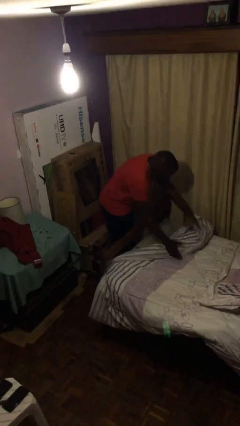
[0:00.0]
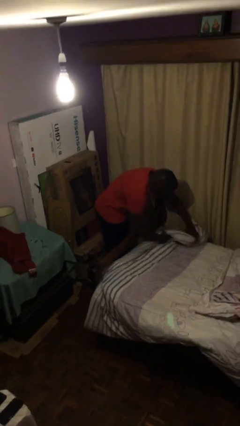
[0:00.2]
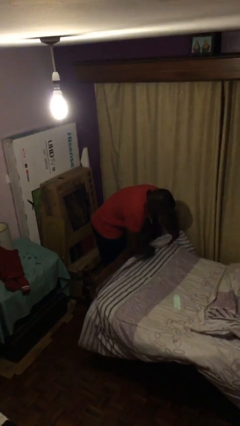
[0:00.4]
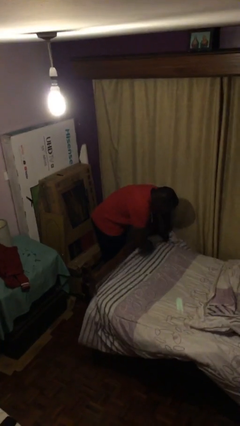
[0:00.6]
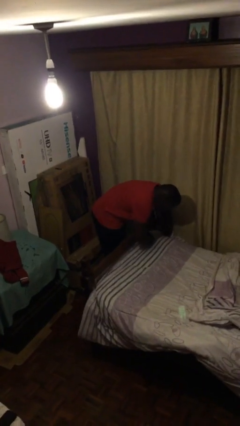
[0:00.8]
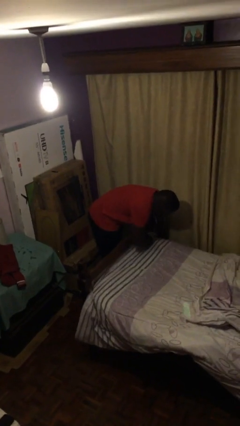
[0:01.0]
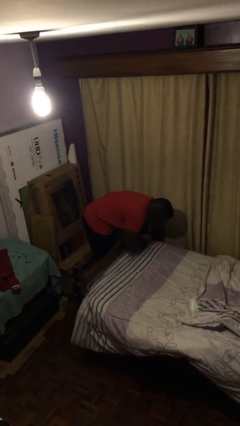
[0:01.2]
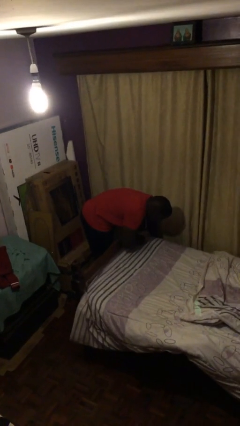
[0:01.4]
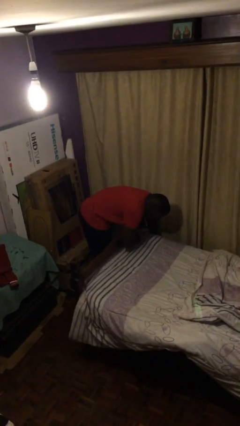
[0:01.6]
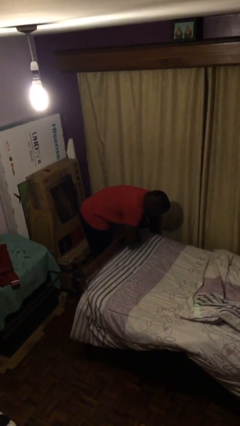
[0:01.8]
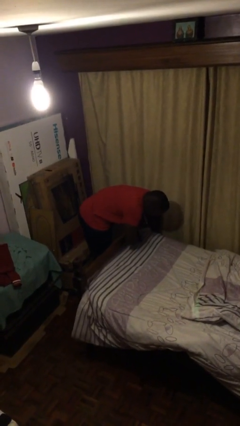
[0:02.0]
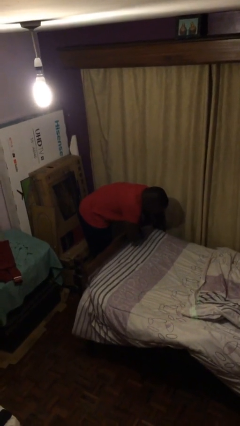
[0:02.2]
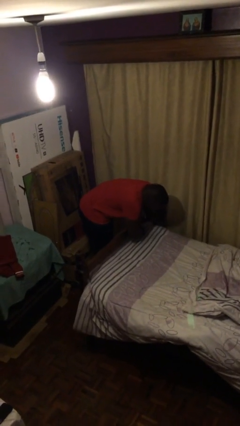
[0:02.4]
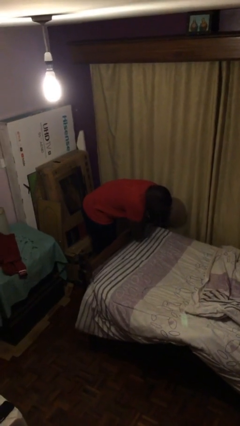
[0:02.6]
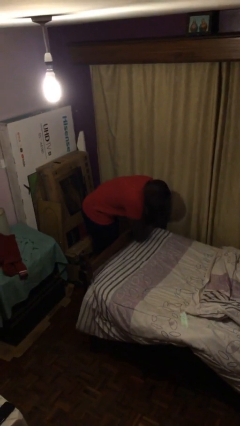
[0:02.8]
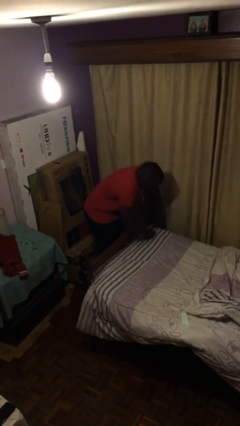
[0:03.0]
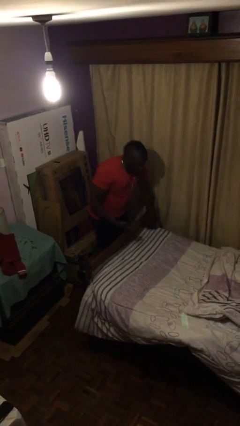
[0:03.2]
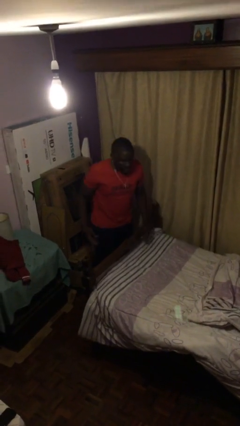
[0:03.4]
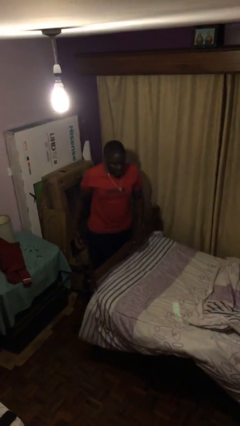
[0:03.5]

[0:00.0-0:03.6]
person makes bed

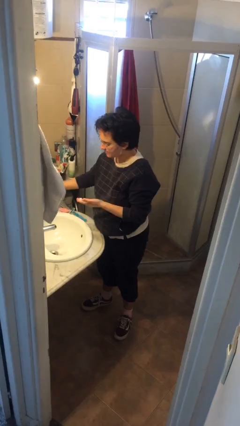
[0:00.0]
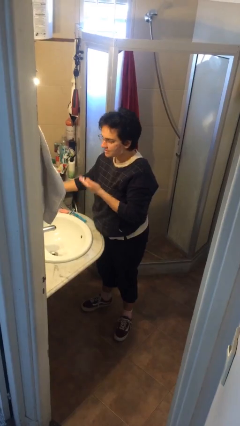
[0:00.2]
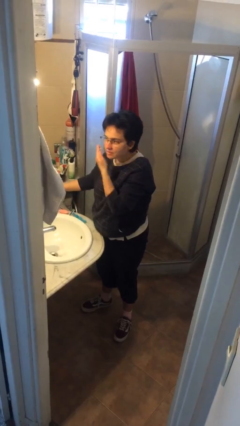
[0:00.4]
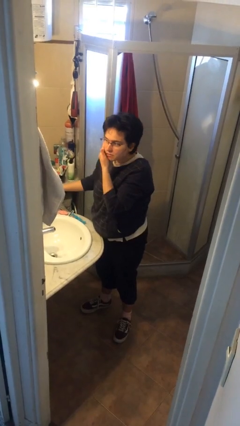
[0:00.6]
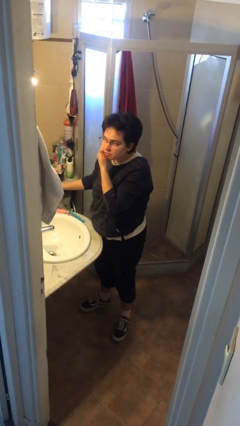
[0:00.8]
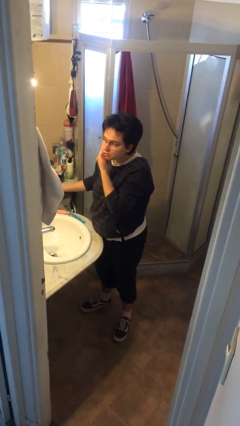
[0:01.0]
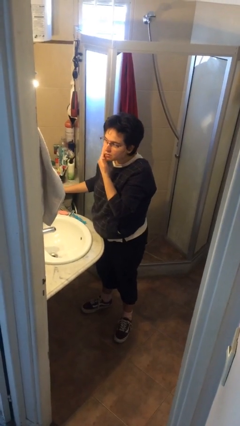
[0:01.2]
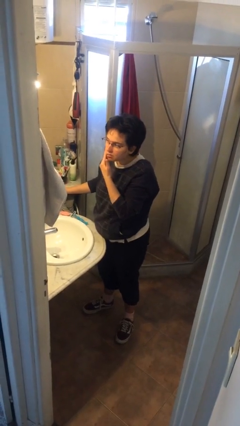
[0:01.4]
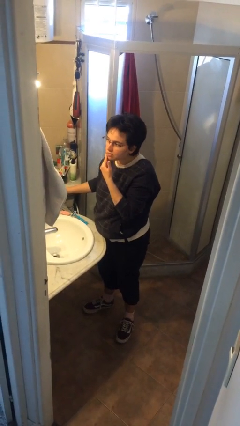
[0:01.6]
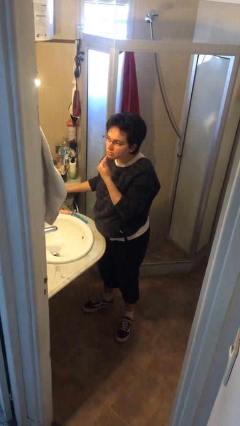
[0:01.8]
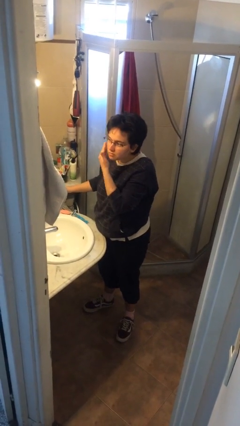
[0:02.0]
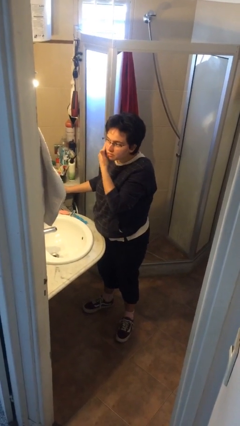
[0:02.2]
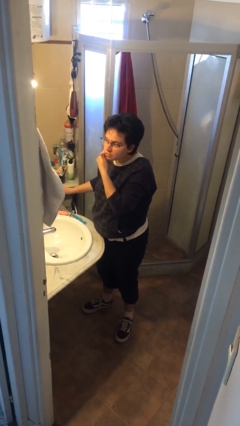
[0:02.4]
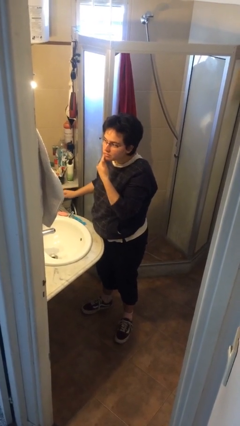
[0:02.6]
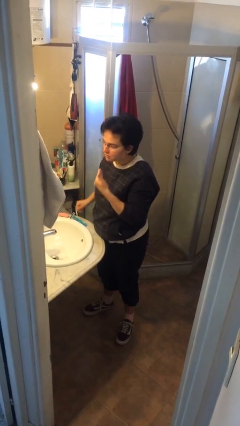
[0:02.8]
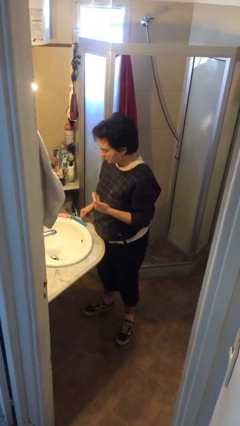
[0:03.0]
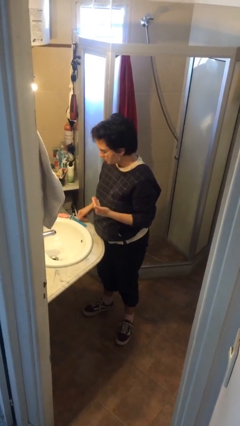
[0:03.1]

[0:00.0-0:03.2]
person applies shaving cream

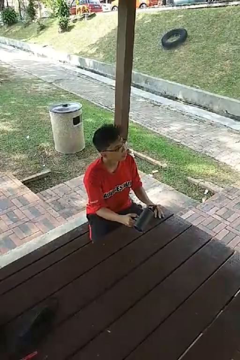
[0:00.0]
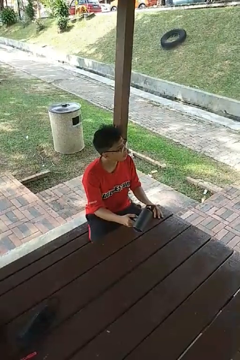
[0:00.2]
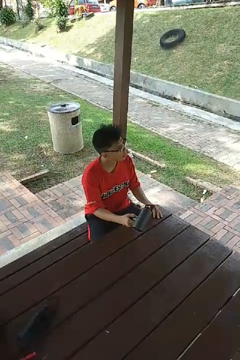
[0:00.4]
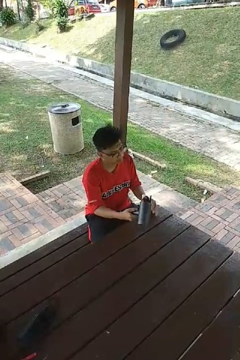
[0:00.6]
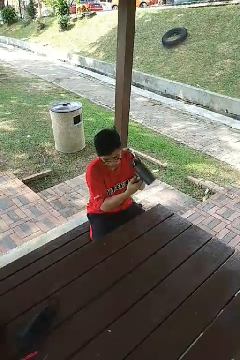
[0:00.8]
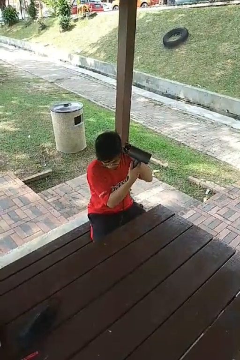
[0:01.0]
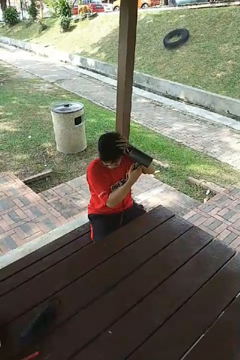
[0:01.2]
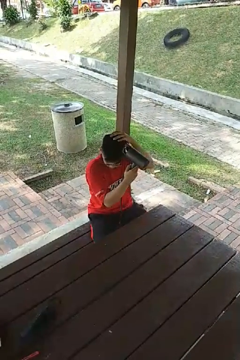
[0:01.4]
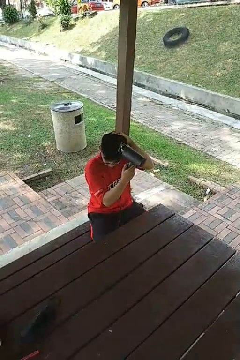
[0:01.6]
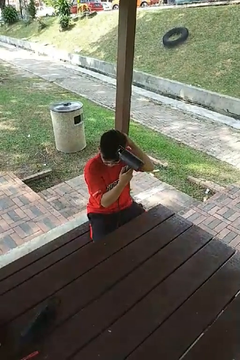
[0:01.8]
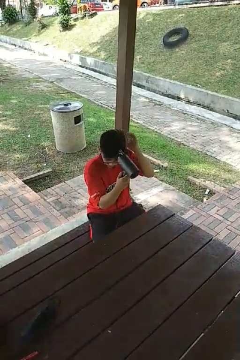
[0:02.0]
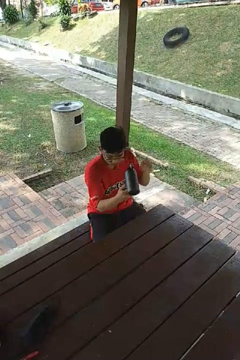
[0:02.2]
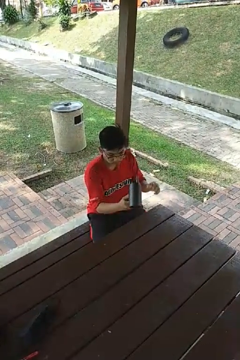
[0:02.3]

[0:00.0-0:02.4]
person dries hair with hairdryer

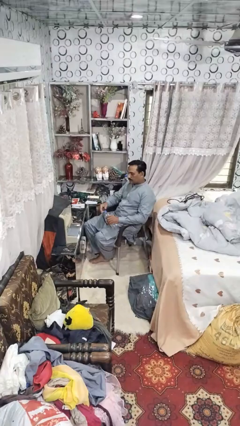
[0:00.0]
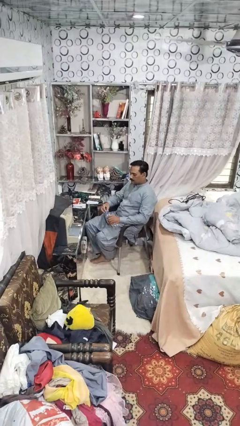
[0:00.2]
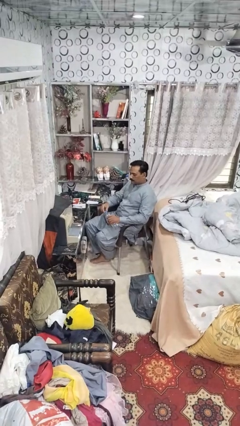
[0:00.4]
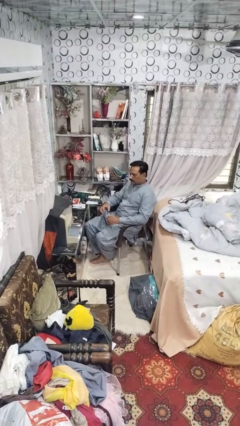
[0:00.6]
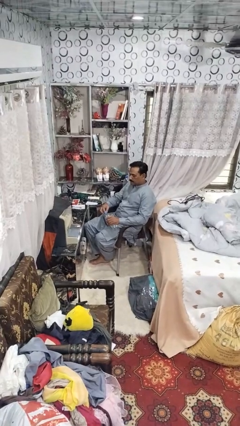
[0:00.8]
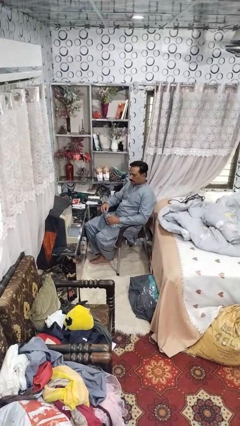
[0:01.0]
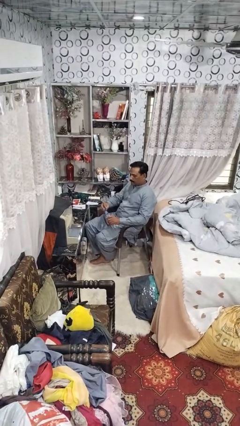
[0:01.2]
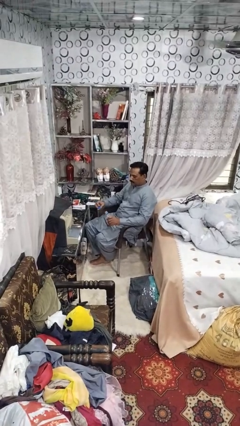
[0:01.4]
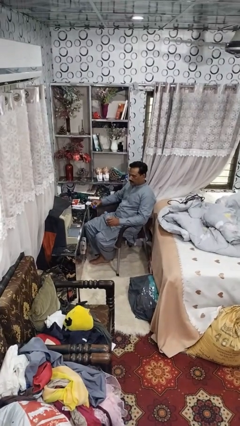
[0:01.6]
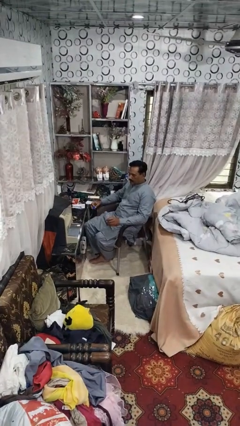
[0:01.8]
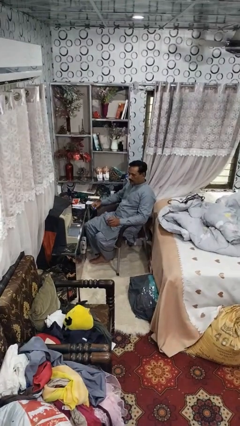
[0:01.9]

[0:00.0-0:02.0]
person unscrews lid from bottle

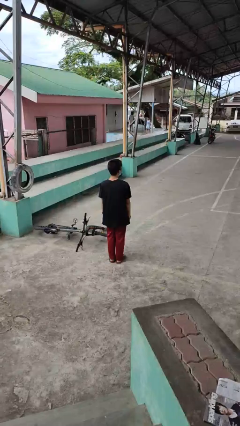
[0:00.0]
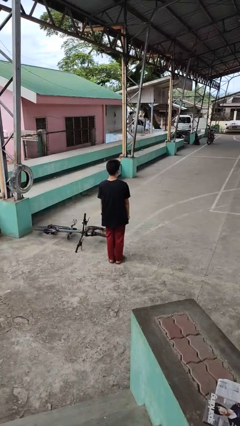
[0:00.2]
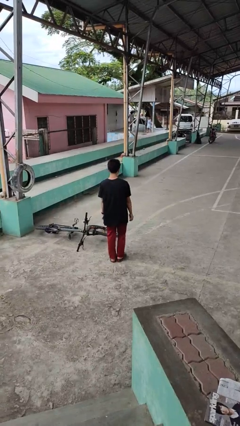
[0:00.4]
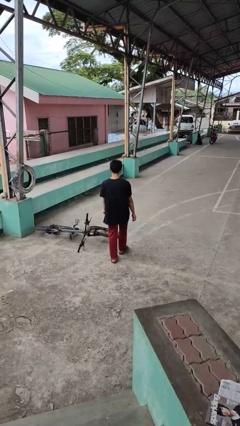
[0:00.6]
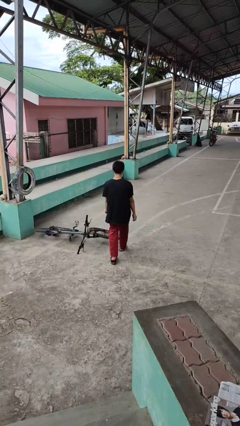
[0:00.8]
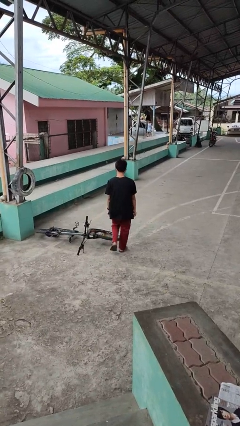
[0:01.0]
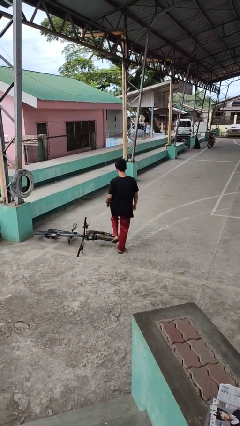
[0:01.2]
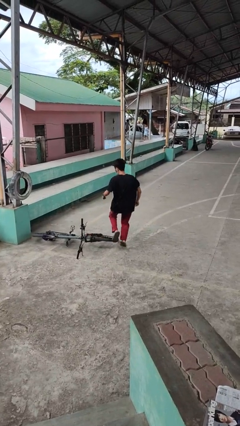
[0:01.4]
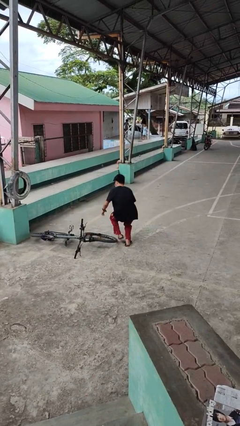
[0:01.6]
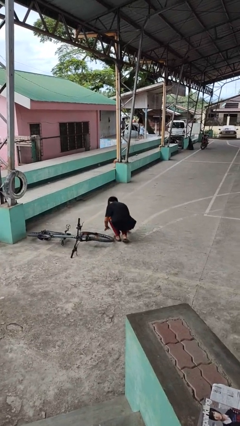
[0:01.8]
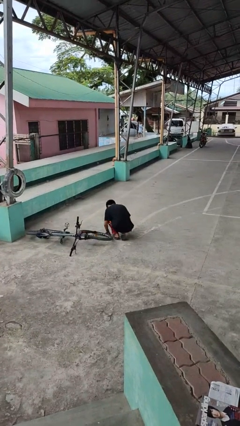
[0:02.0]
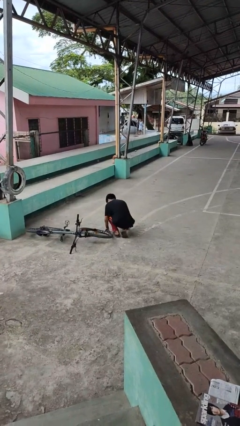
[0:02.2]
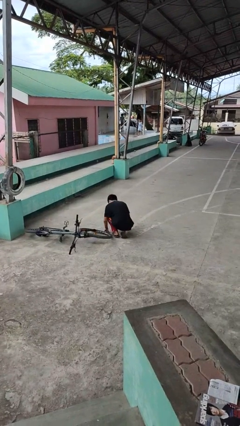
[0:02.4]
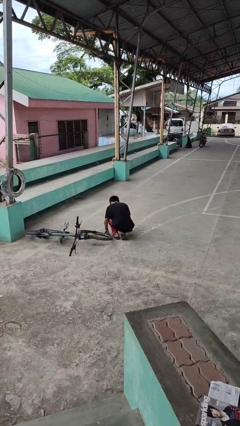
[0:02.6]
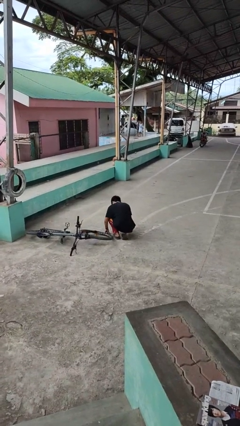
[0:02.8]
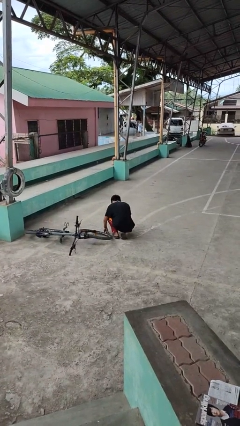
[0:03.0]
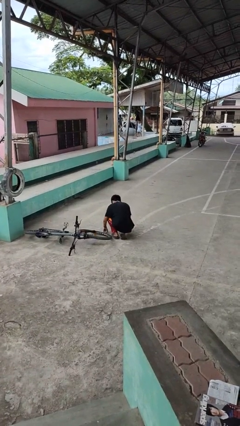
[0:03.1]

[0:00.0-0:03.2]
person trips on object on floor

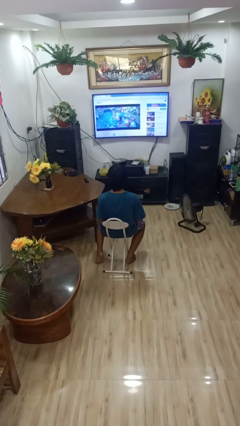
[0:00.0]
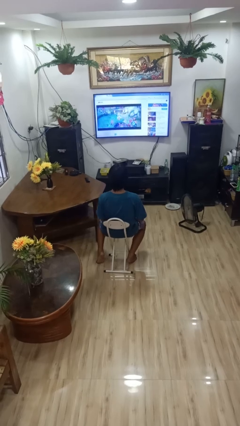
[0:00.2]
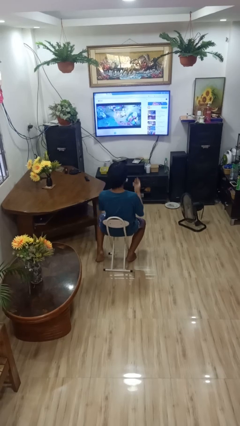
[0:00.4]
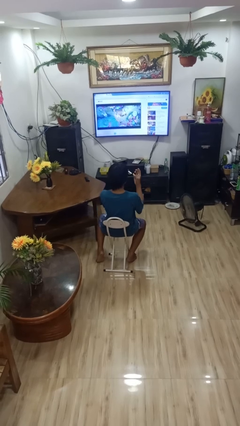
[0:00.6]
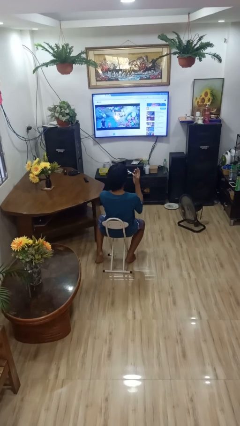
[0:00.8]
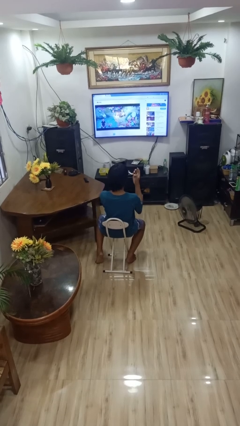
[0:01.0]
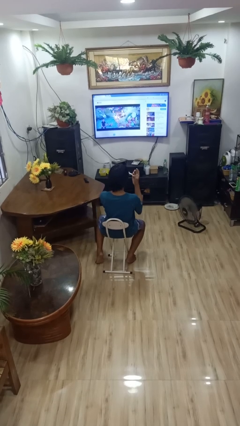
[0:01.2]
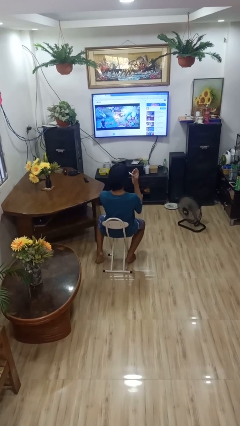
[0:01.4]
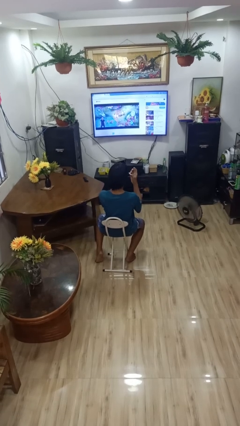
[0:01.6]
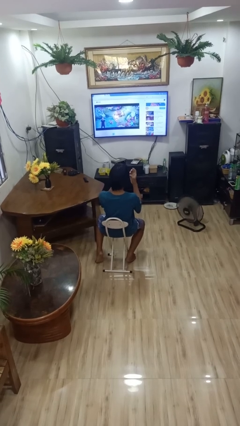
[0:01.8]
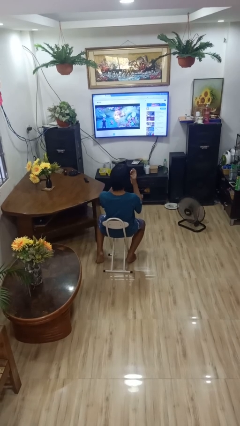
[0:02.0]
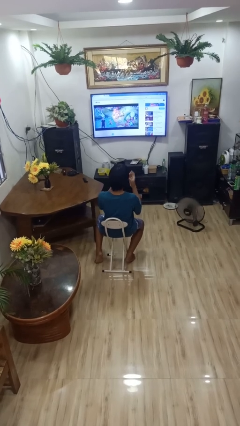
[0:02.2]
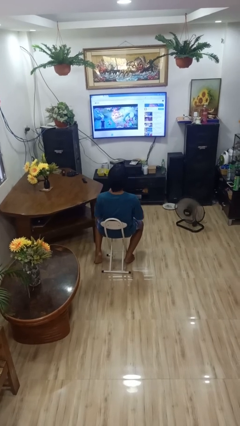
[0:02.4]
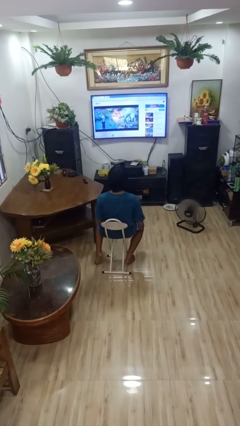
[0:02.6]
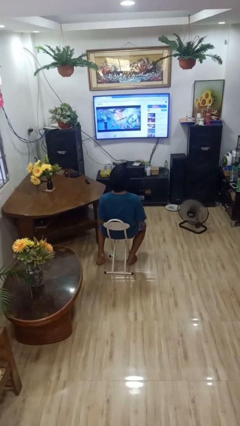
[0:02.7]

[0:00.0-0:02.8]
person clips fingernails

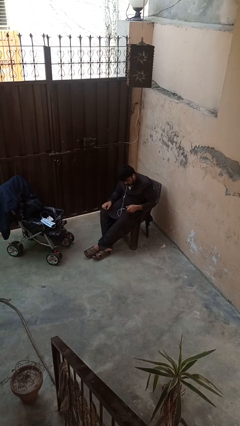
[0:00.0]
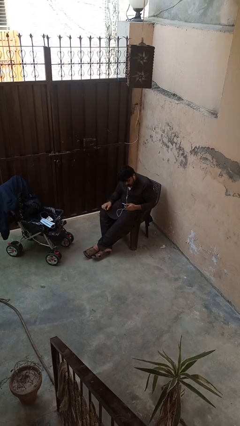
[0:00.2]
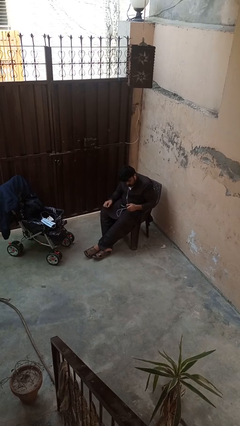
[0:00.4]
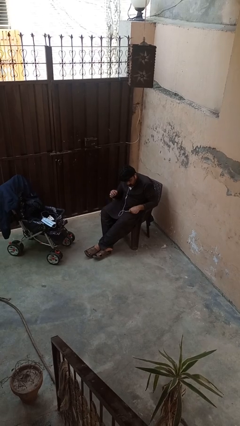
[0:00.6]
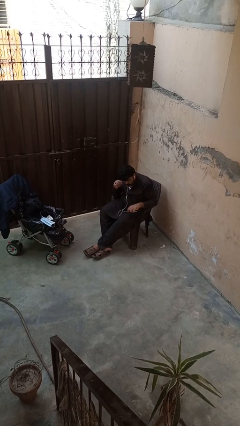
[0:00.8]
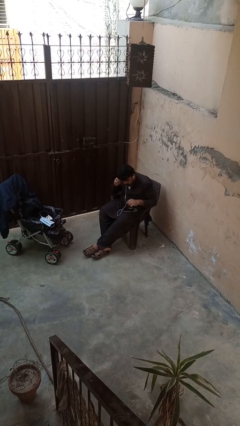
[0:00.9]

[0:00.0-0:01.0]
person takes off headphones
